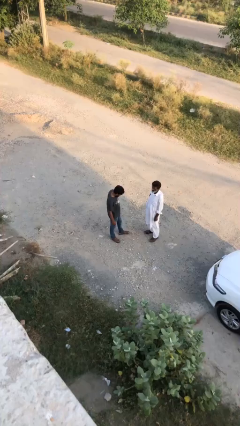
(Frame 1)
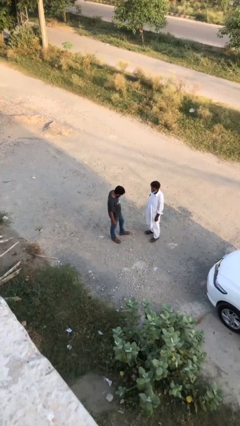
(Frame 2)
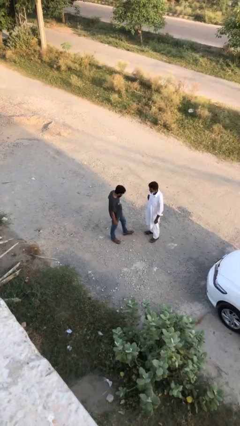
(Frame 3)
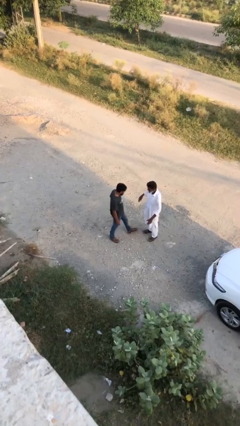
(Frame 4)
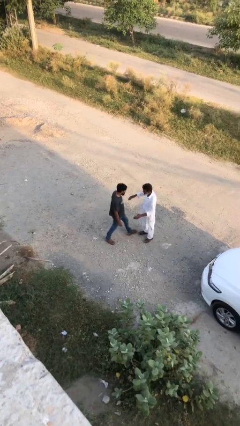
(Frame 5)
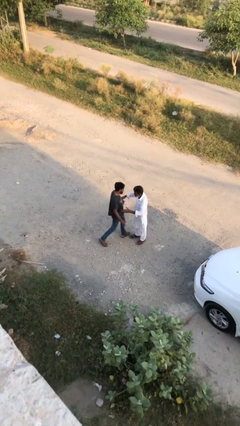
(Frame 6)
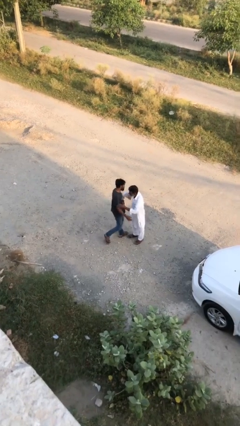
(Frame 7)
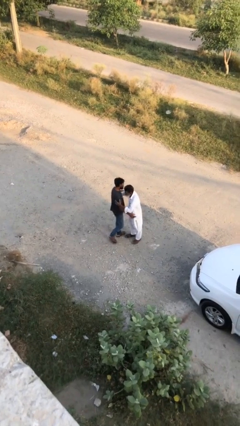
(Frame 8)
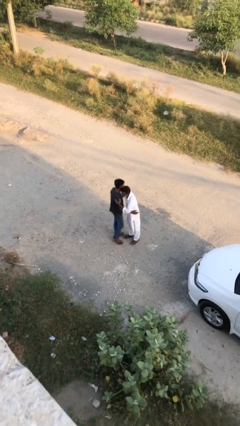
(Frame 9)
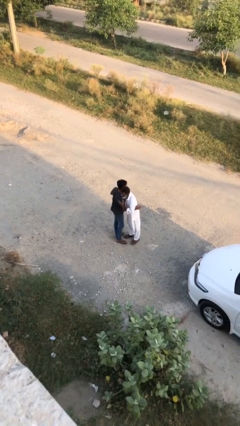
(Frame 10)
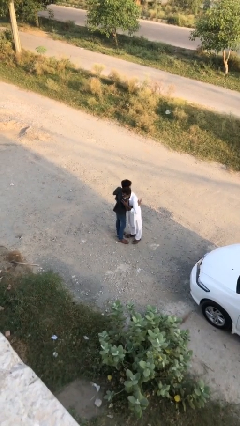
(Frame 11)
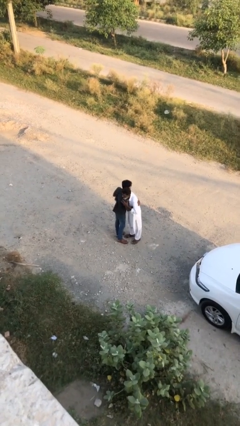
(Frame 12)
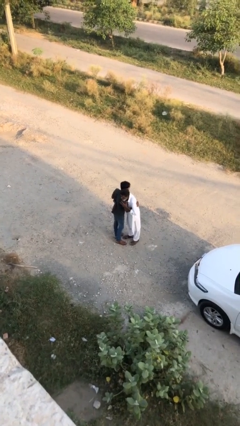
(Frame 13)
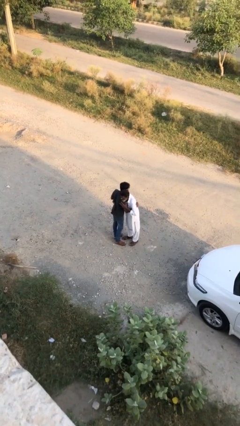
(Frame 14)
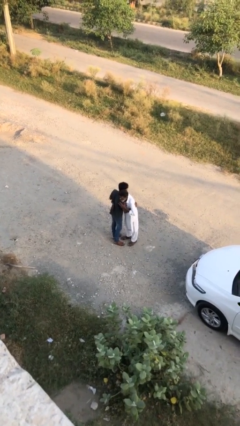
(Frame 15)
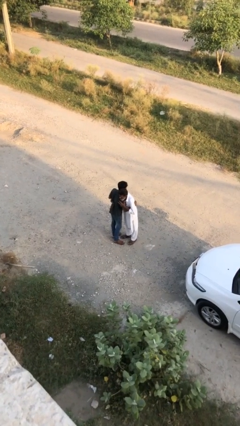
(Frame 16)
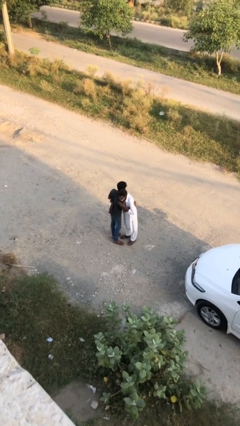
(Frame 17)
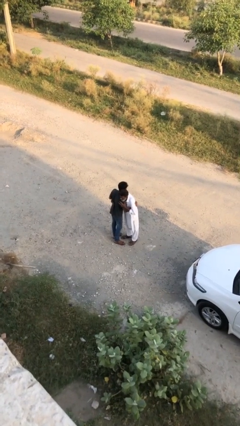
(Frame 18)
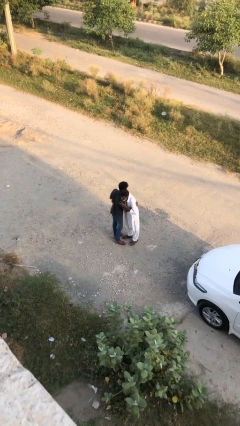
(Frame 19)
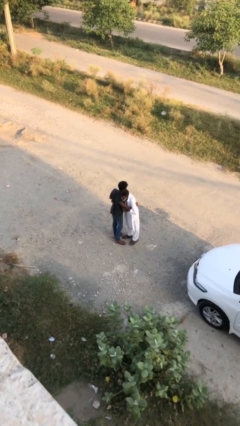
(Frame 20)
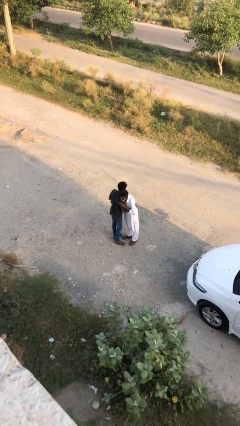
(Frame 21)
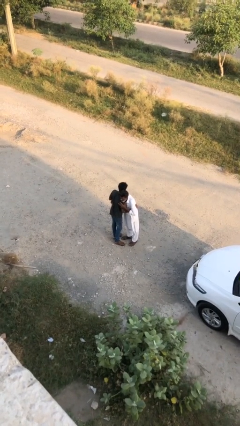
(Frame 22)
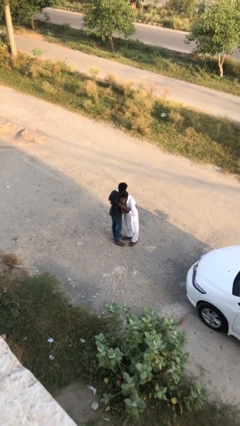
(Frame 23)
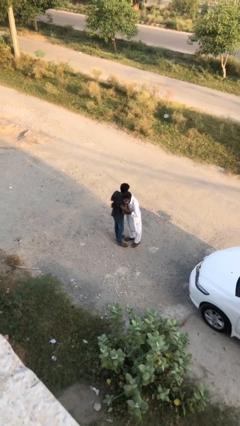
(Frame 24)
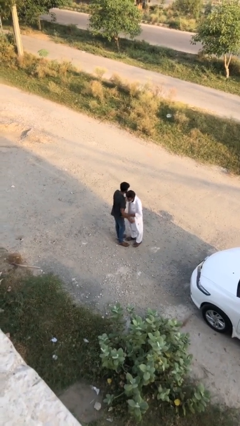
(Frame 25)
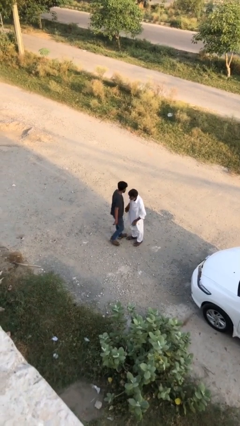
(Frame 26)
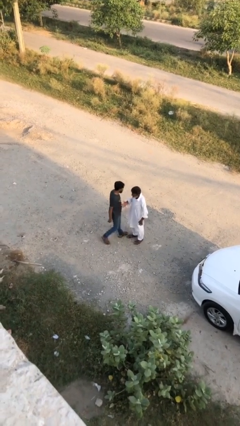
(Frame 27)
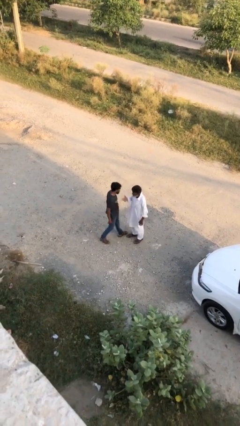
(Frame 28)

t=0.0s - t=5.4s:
person embraces person

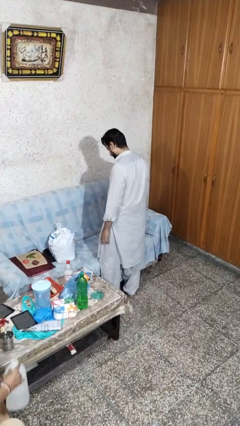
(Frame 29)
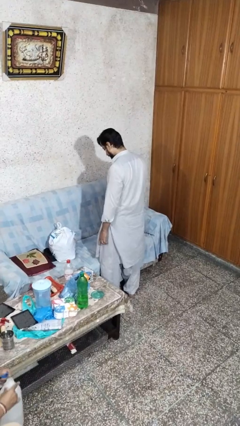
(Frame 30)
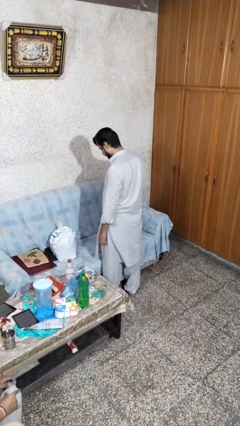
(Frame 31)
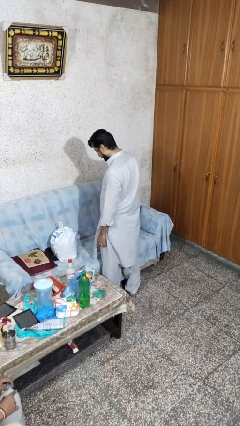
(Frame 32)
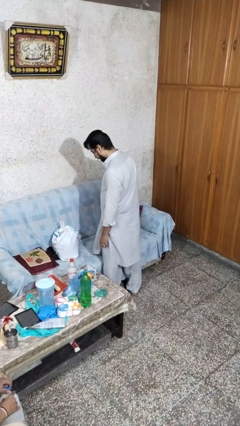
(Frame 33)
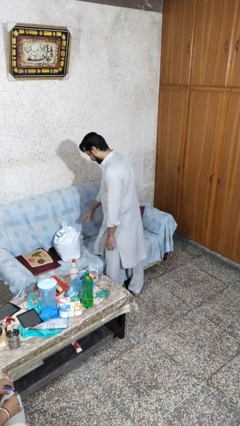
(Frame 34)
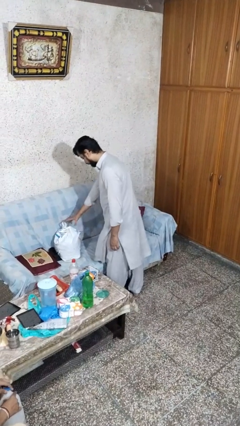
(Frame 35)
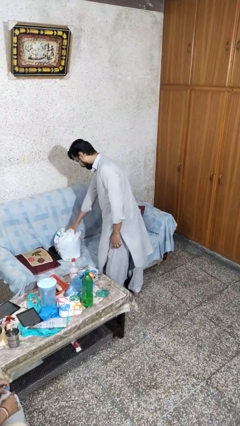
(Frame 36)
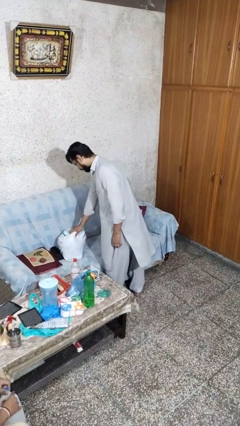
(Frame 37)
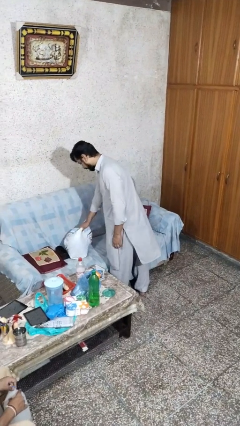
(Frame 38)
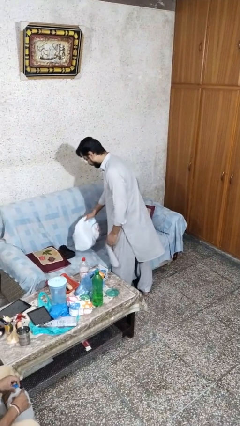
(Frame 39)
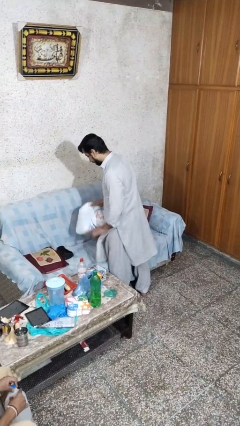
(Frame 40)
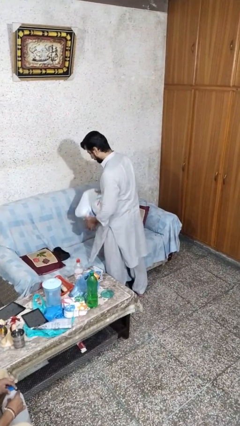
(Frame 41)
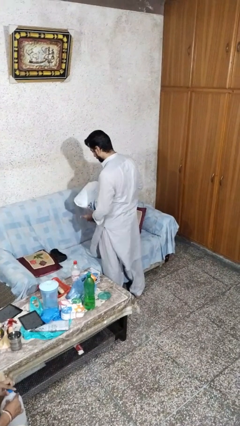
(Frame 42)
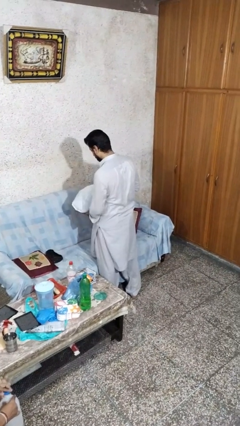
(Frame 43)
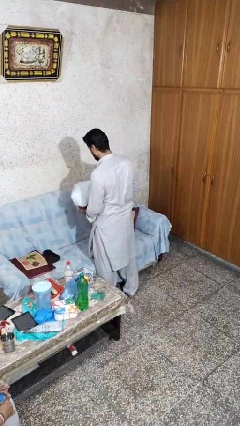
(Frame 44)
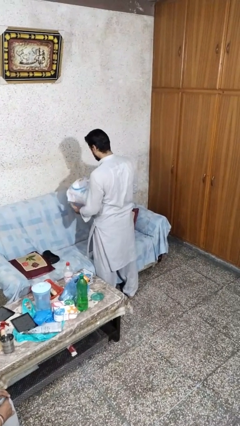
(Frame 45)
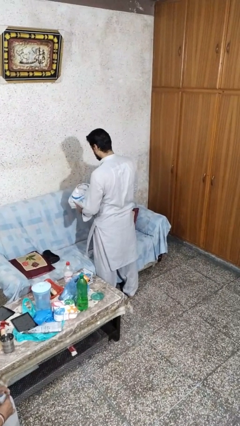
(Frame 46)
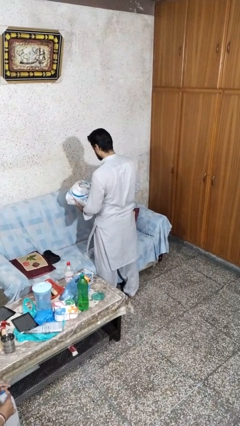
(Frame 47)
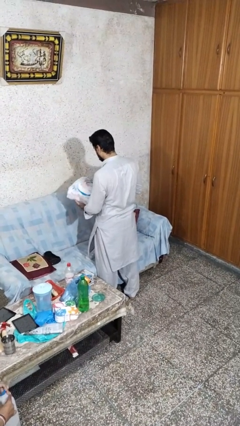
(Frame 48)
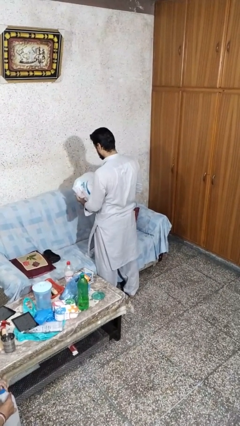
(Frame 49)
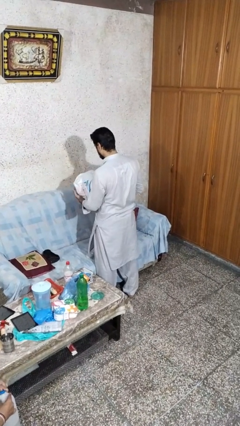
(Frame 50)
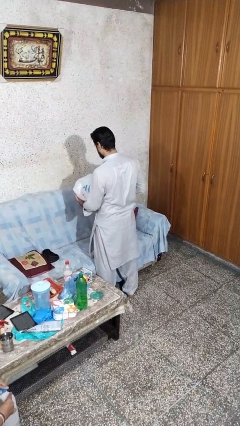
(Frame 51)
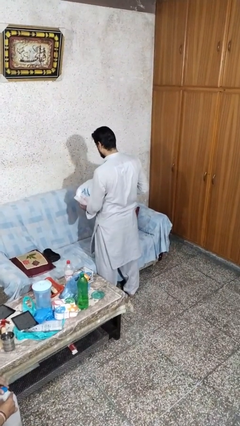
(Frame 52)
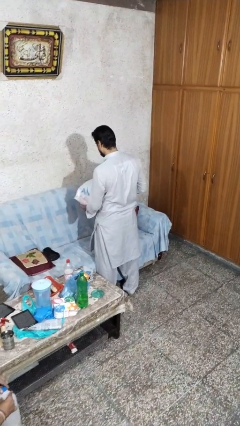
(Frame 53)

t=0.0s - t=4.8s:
person picks up object from couch

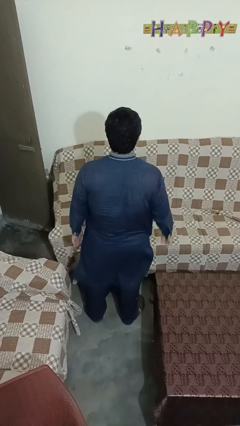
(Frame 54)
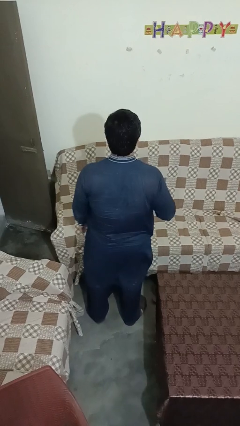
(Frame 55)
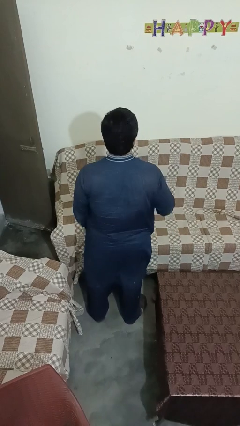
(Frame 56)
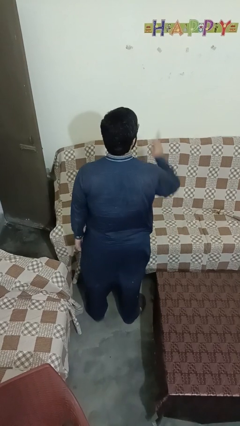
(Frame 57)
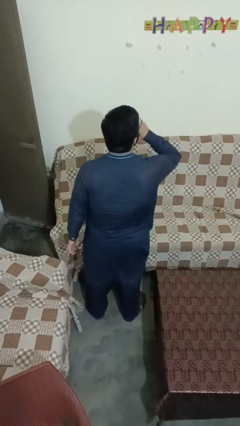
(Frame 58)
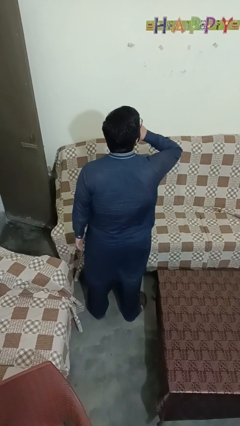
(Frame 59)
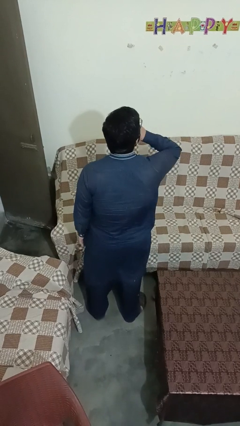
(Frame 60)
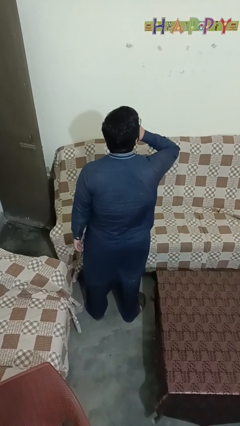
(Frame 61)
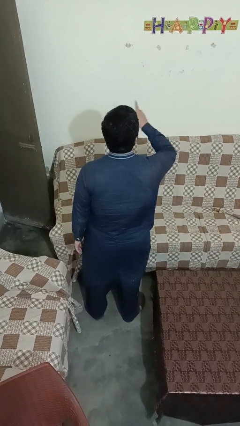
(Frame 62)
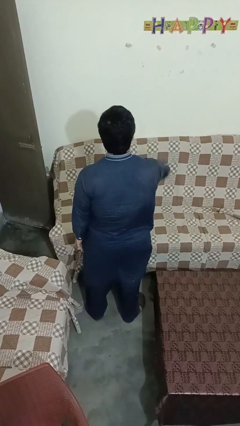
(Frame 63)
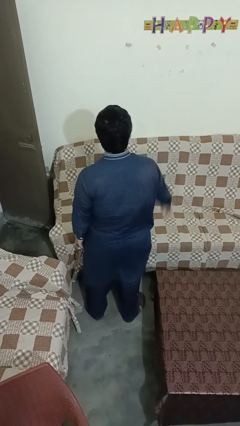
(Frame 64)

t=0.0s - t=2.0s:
person gestures be quiet

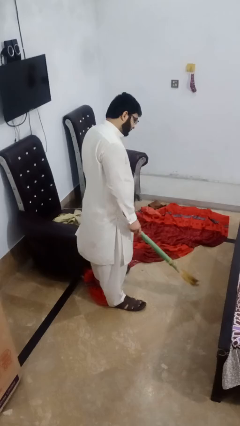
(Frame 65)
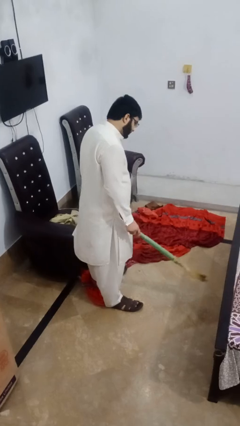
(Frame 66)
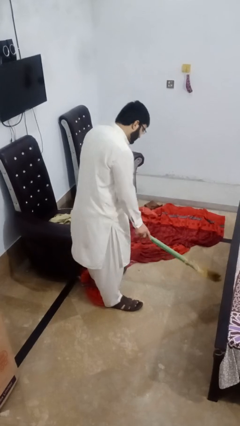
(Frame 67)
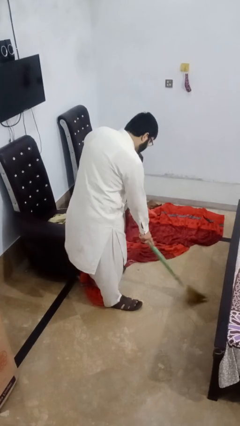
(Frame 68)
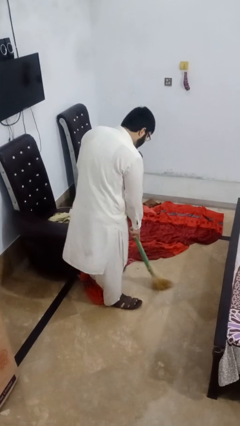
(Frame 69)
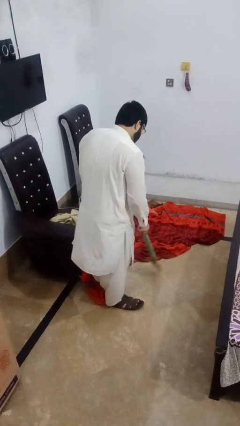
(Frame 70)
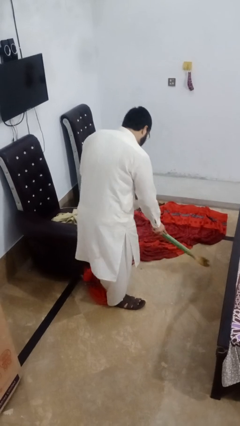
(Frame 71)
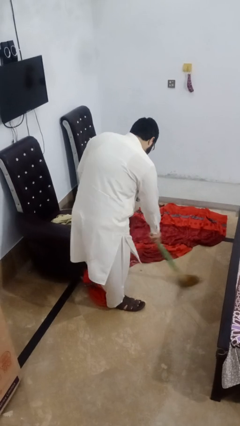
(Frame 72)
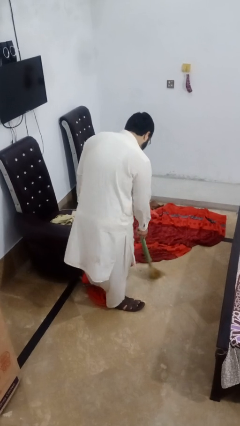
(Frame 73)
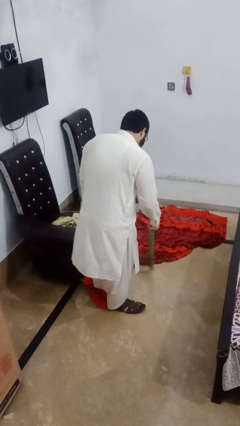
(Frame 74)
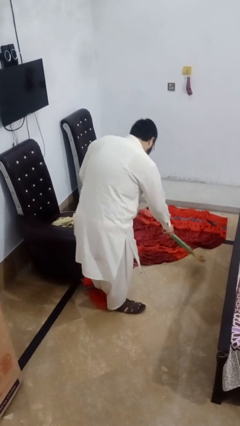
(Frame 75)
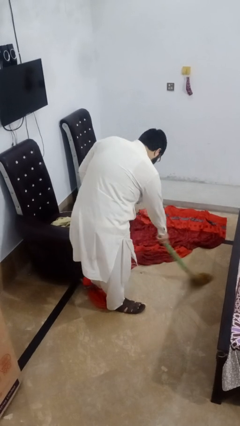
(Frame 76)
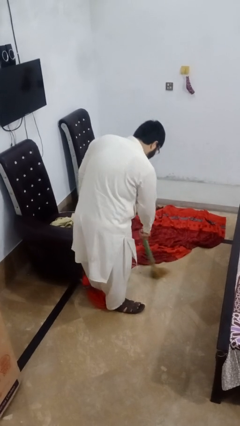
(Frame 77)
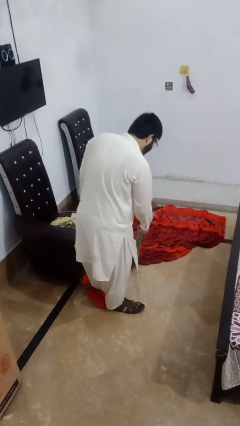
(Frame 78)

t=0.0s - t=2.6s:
person sweeps floor

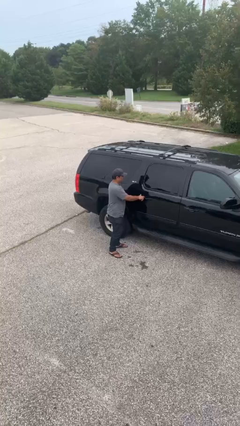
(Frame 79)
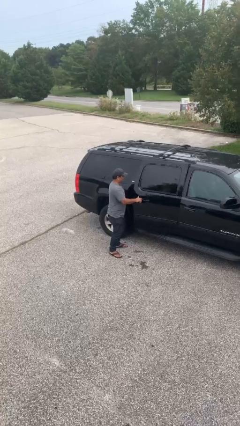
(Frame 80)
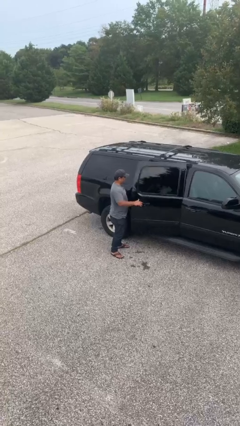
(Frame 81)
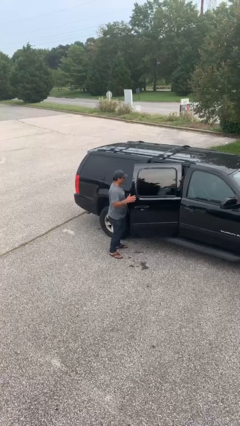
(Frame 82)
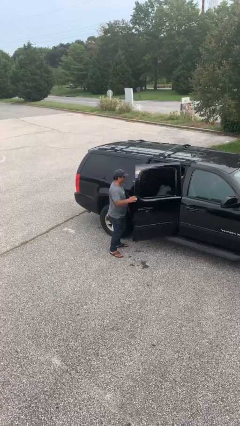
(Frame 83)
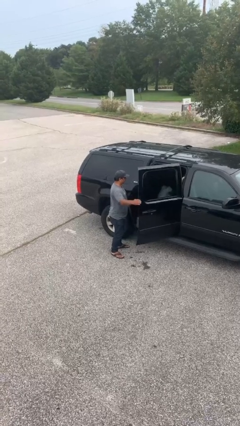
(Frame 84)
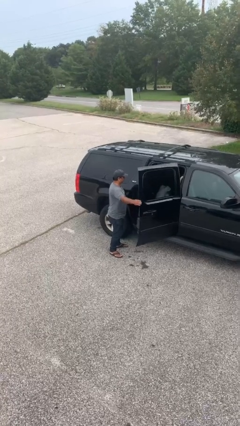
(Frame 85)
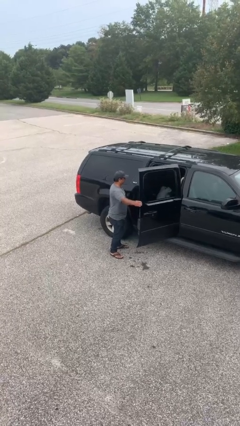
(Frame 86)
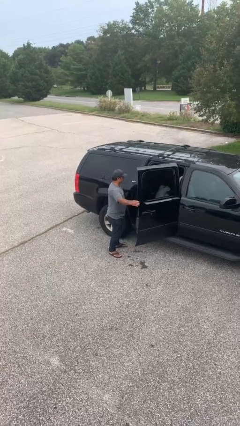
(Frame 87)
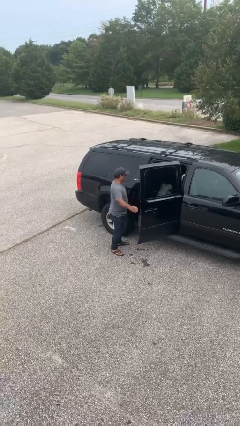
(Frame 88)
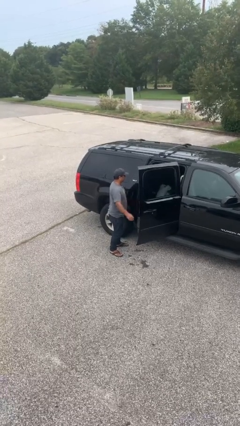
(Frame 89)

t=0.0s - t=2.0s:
person opens car door

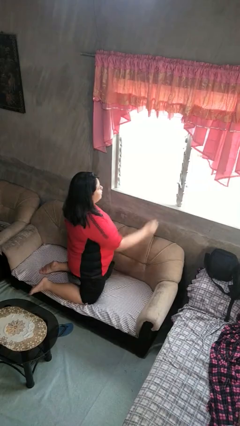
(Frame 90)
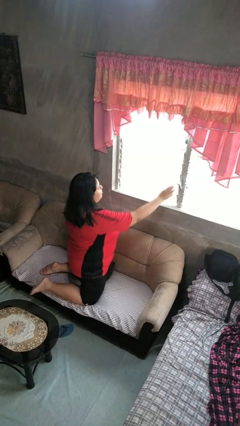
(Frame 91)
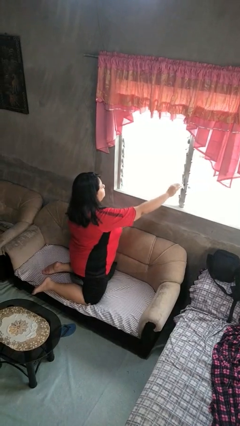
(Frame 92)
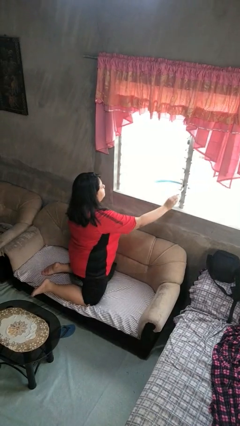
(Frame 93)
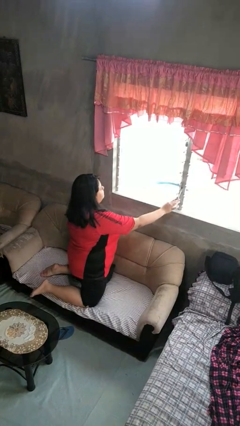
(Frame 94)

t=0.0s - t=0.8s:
person opens home window
